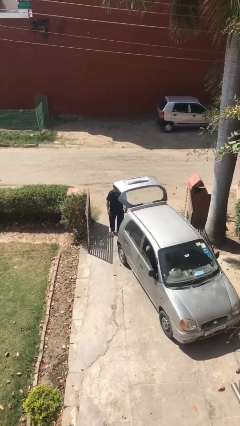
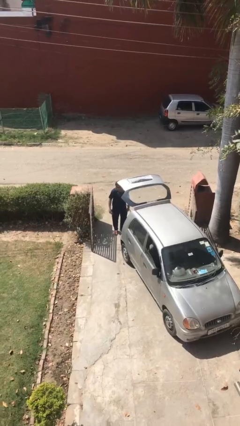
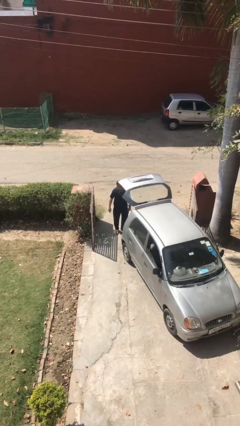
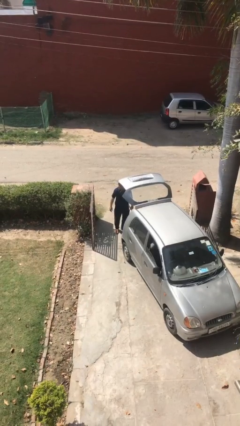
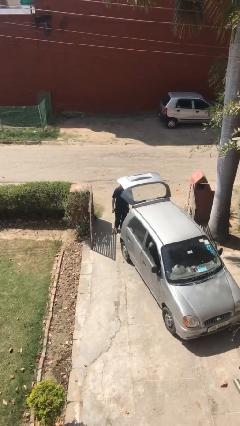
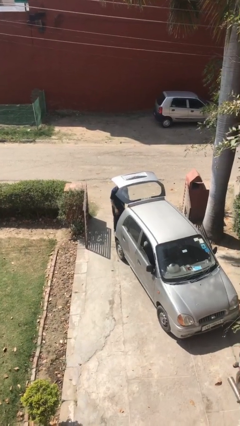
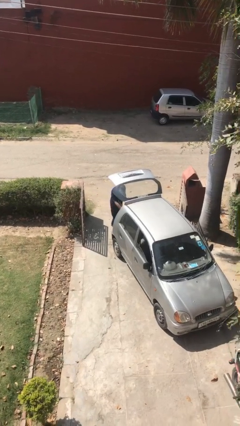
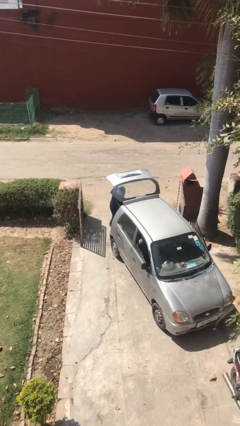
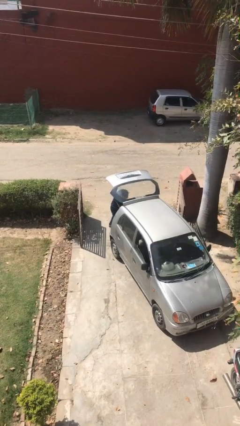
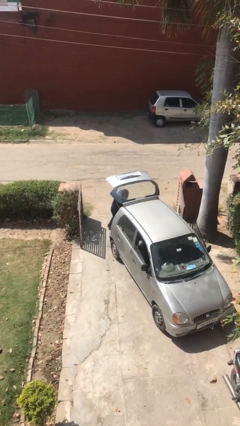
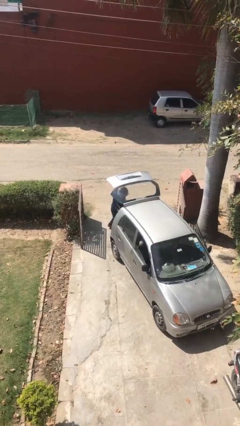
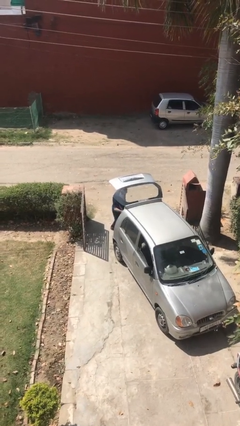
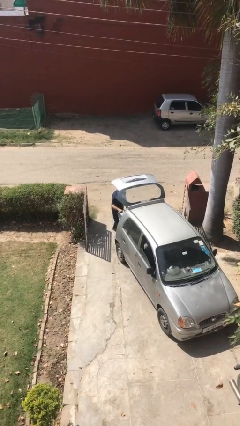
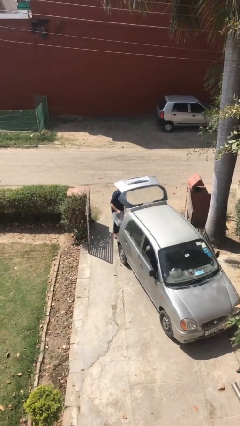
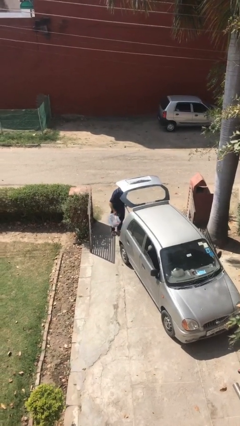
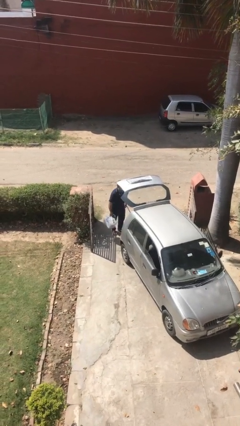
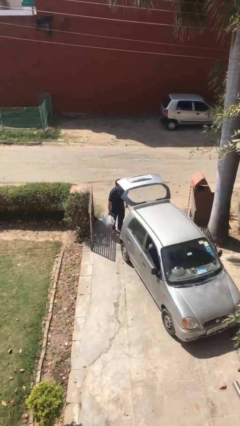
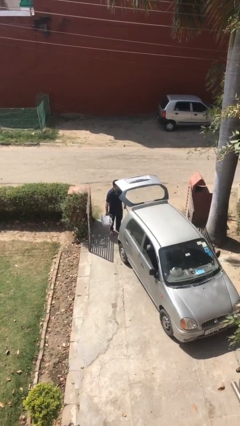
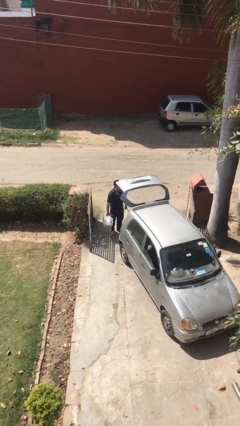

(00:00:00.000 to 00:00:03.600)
person unloads car

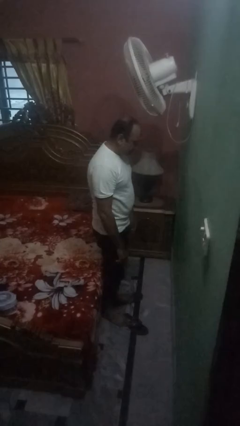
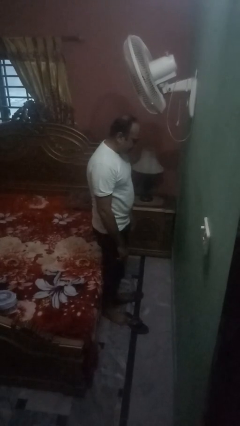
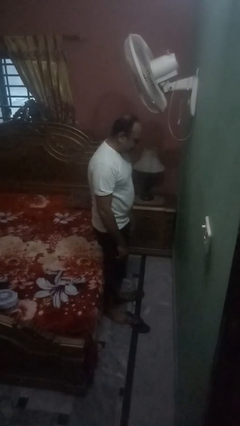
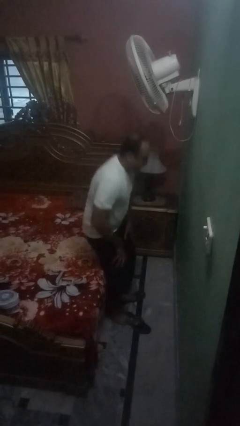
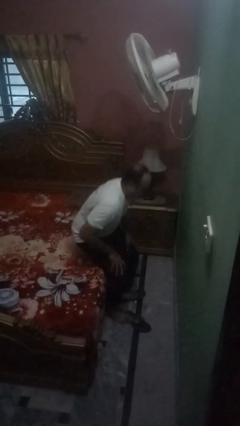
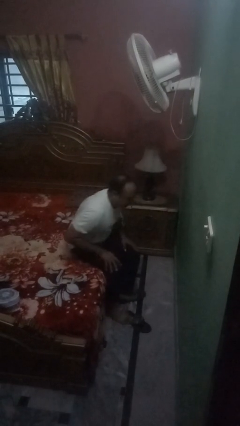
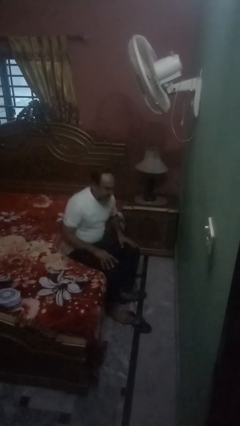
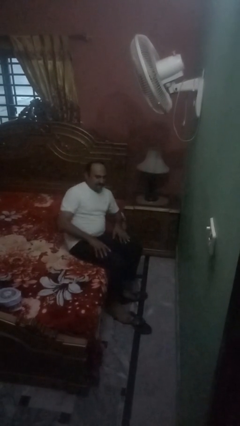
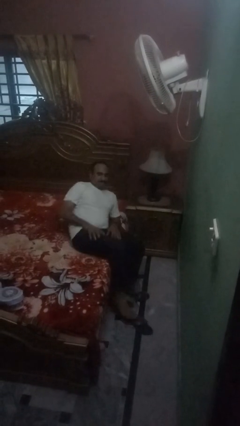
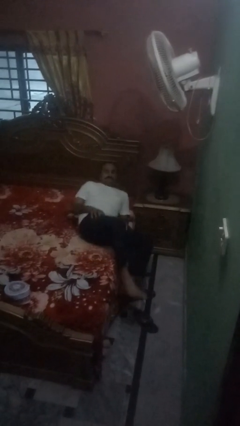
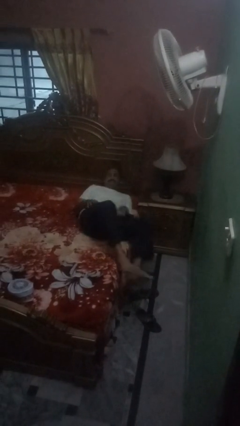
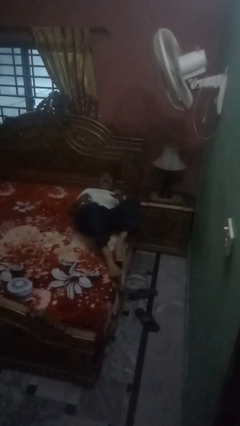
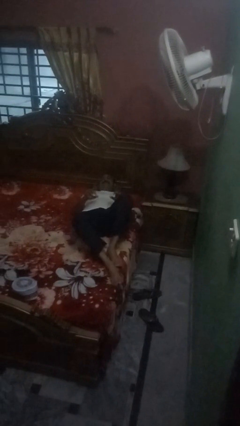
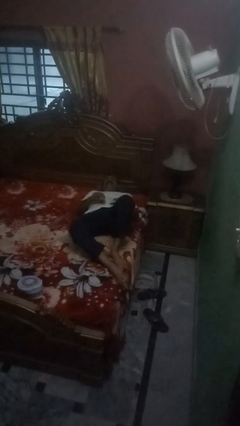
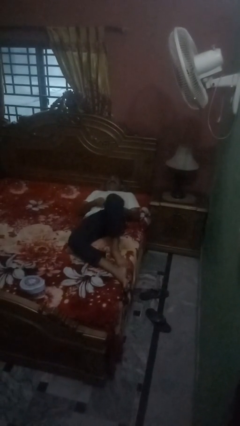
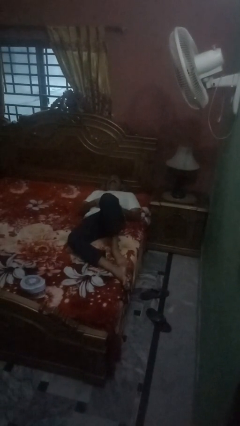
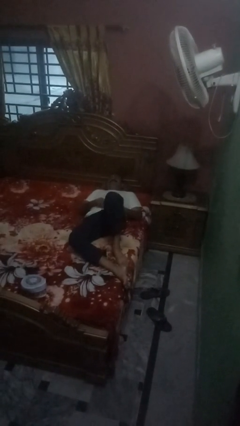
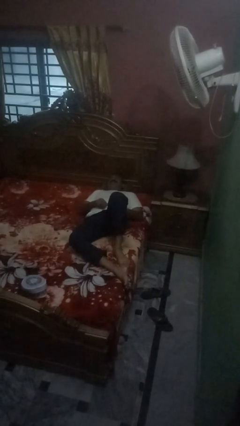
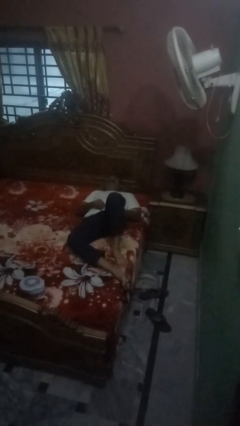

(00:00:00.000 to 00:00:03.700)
person lies down on bed

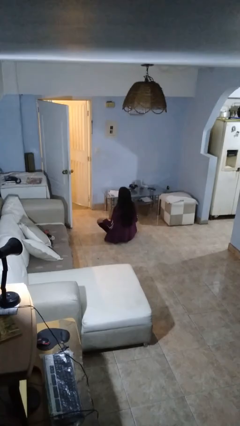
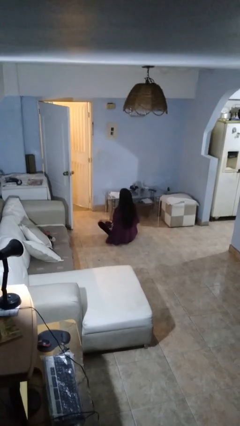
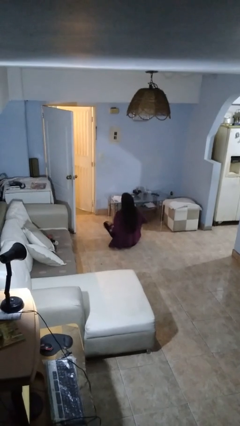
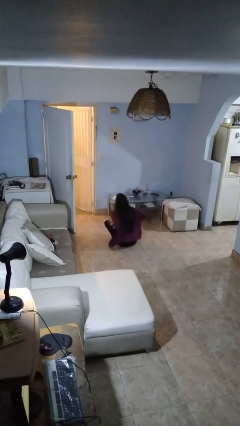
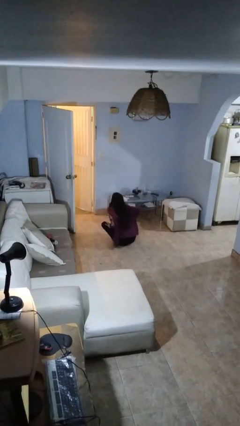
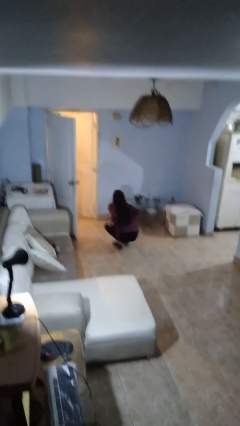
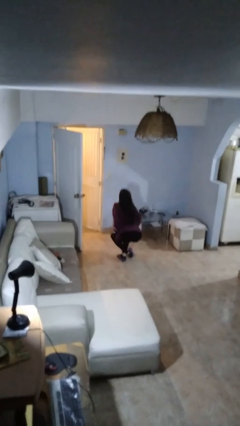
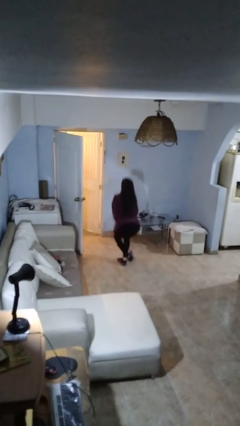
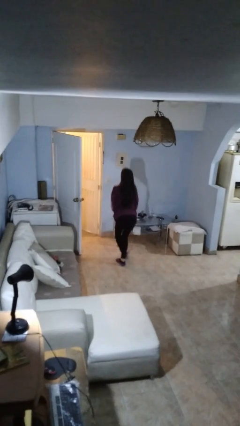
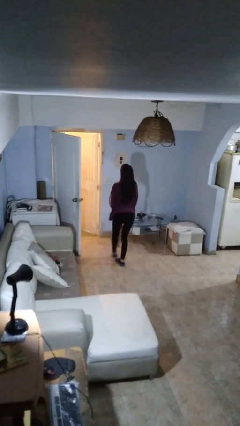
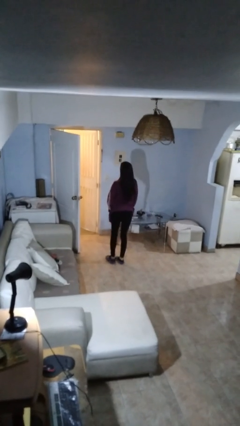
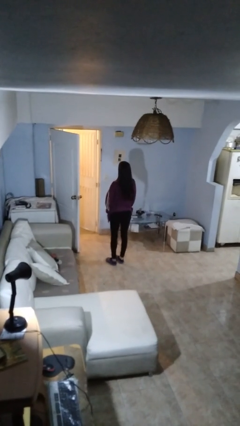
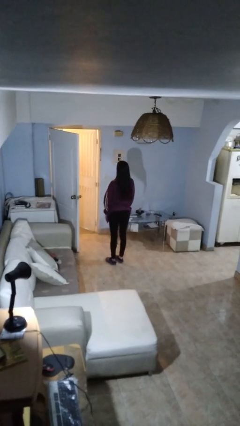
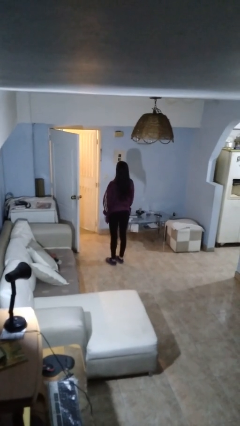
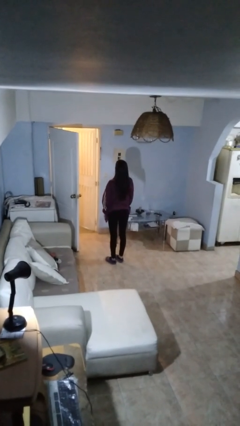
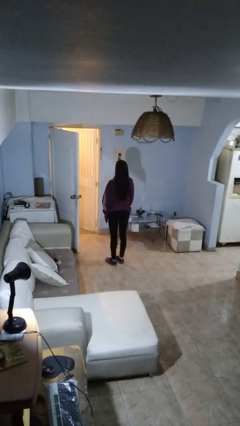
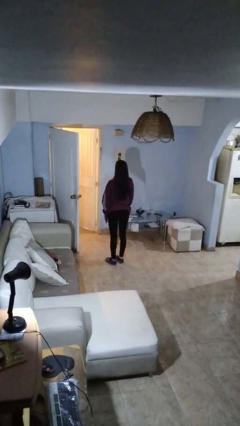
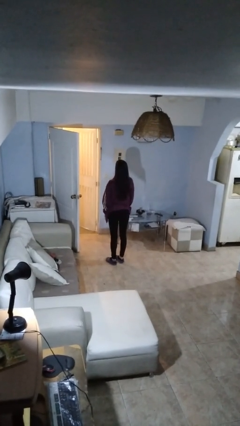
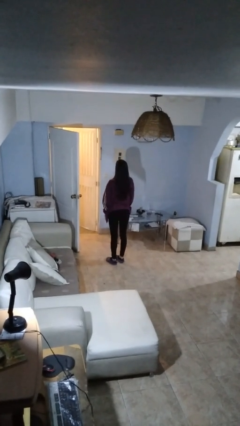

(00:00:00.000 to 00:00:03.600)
person stands up from floor

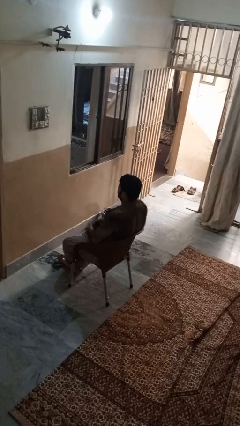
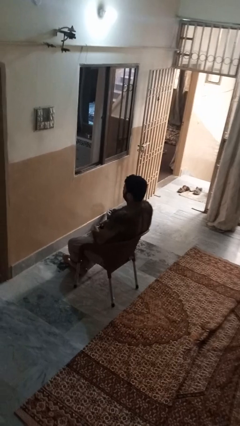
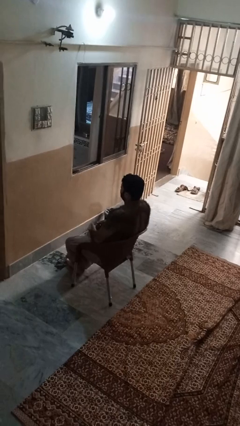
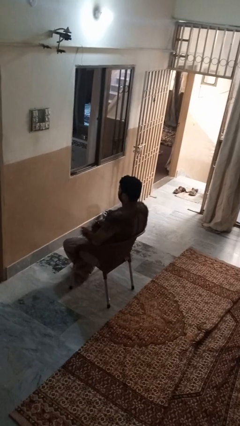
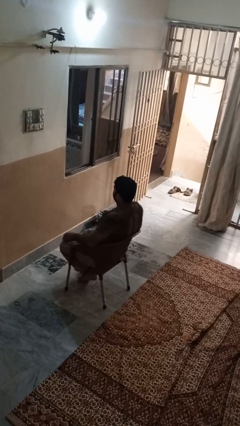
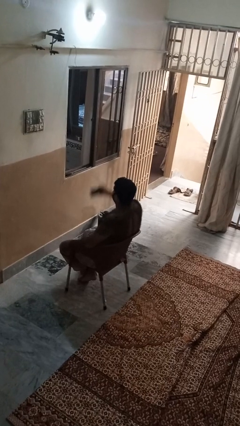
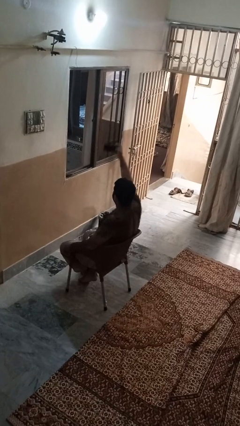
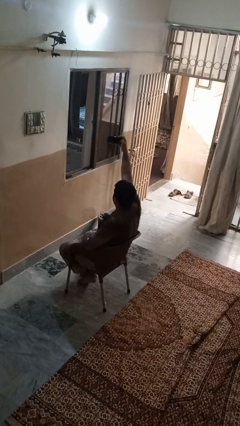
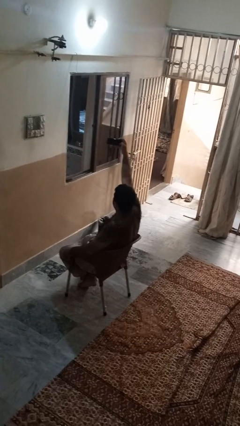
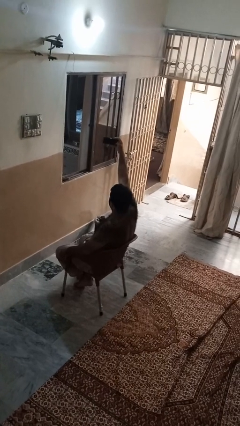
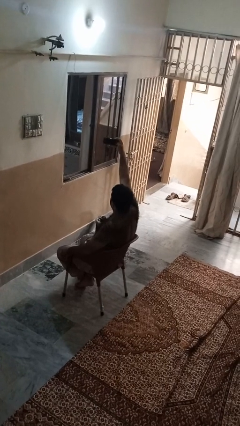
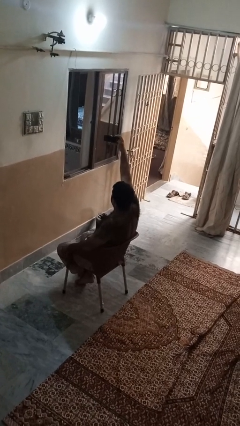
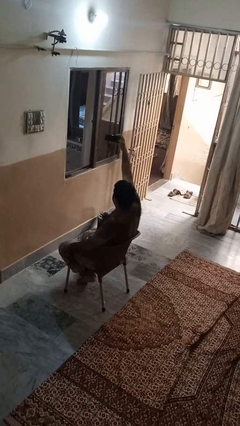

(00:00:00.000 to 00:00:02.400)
person takes selfie

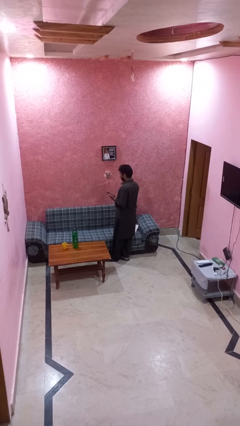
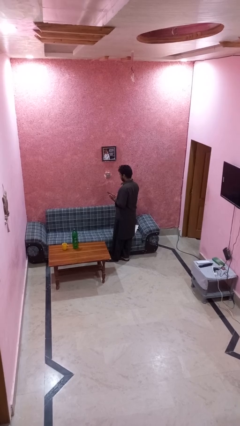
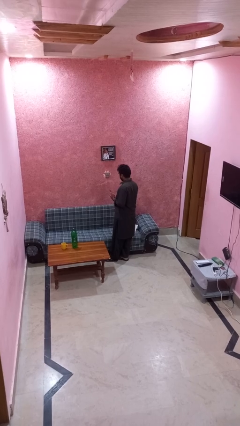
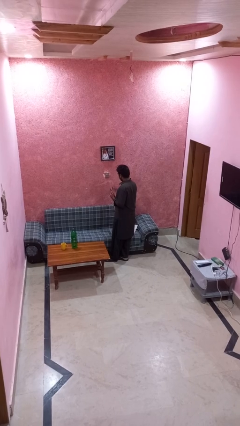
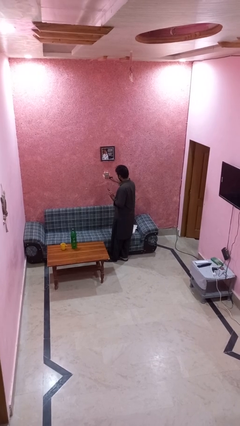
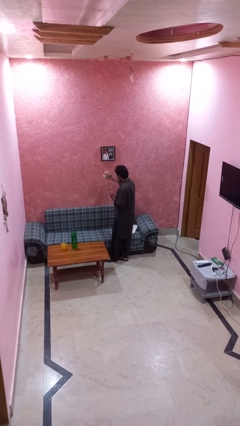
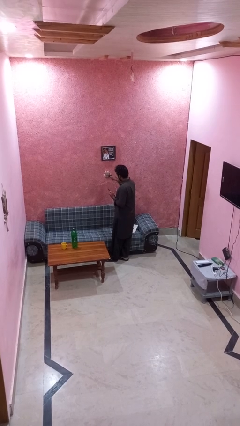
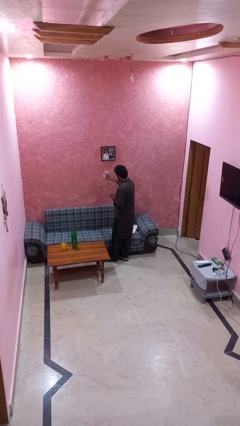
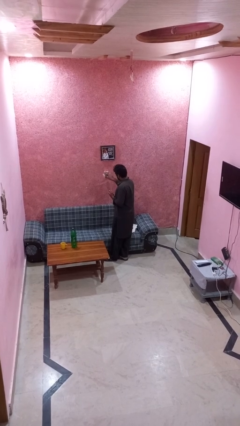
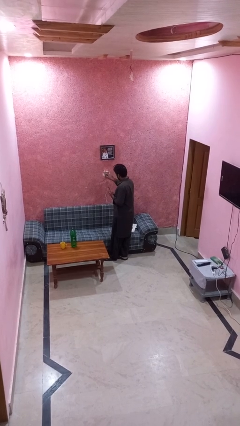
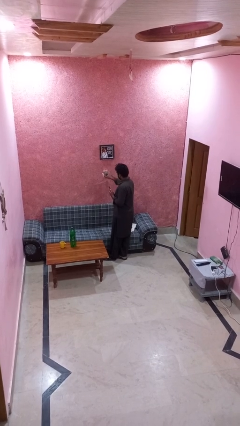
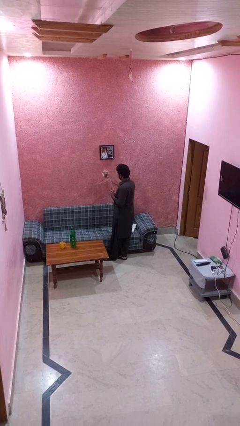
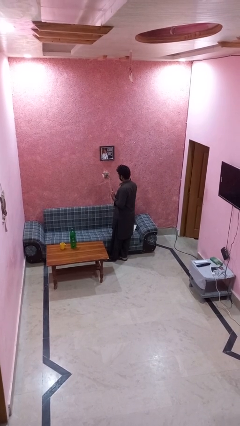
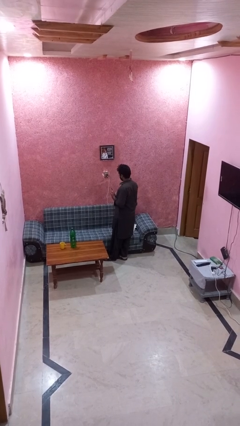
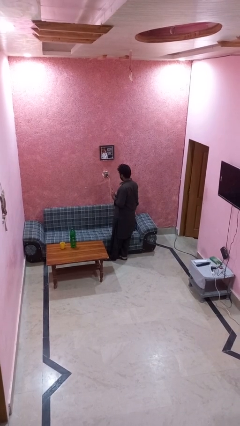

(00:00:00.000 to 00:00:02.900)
person plugs into electrical socket

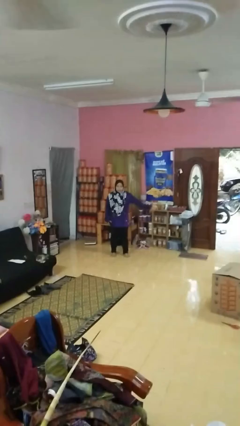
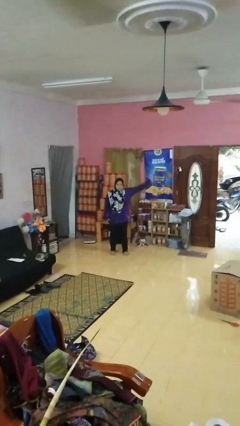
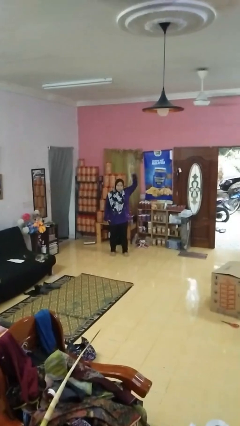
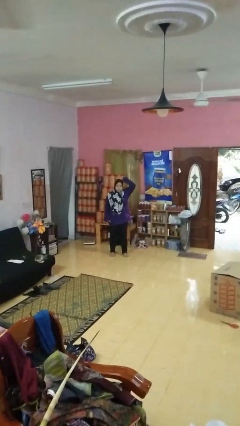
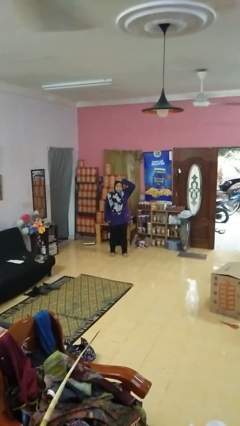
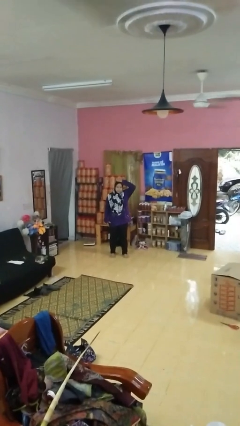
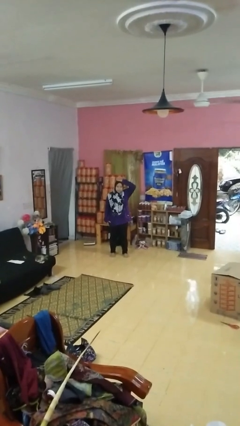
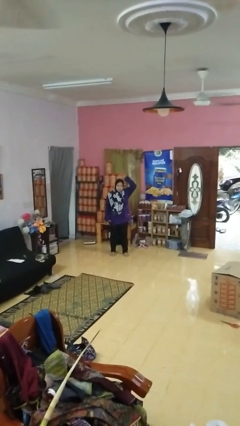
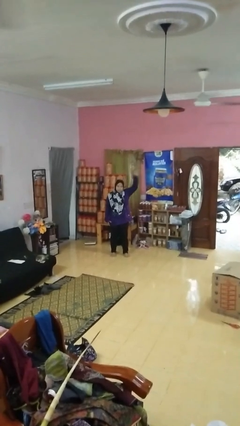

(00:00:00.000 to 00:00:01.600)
person pats head
